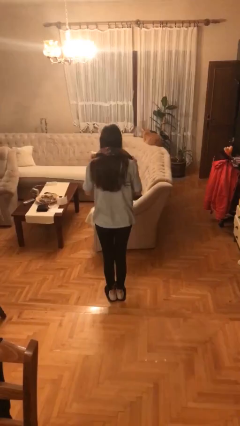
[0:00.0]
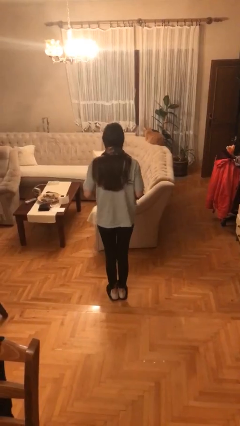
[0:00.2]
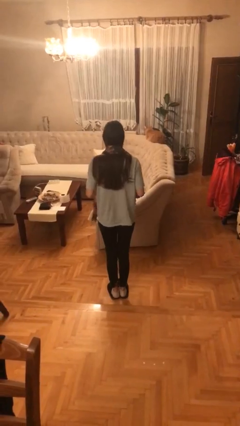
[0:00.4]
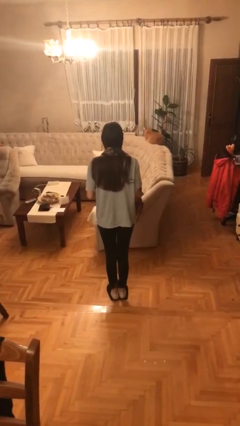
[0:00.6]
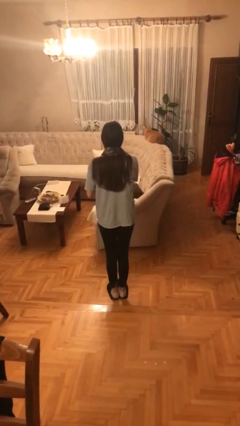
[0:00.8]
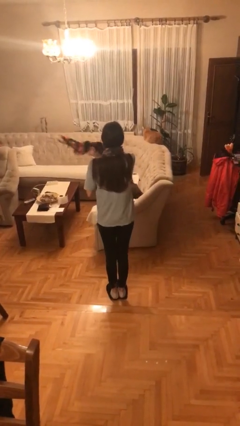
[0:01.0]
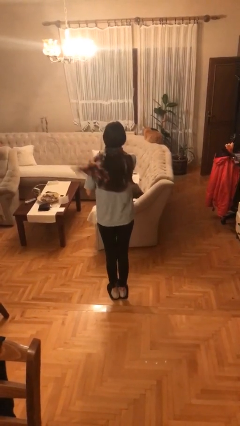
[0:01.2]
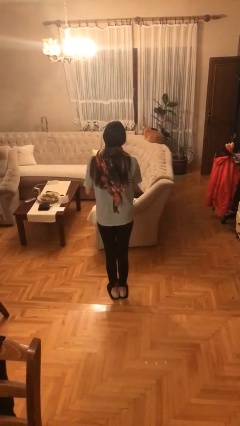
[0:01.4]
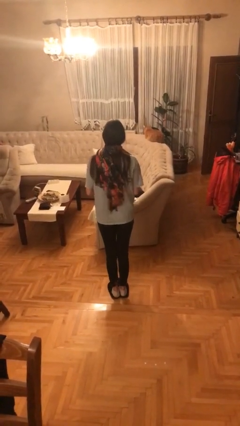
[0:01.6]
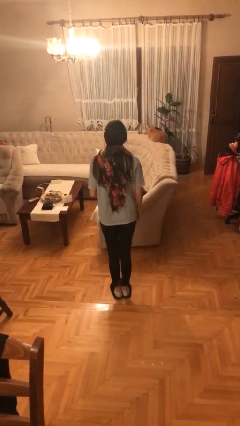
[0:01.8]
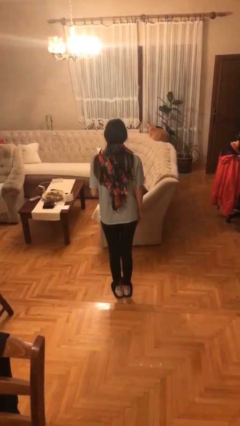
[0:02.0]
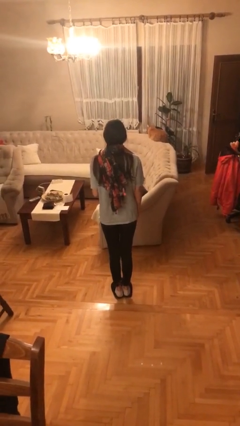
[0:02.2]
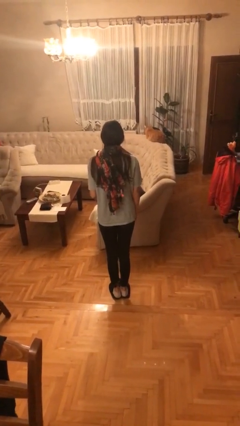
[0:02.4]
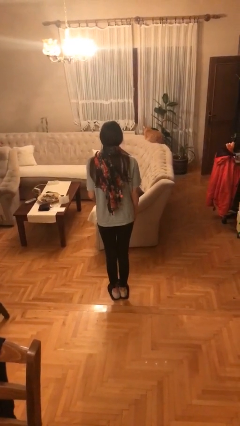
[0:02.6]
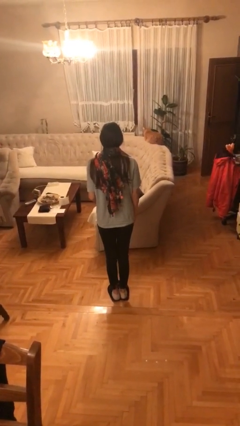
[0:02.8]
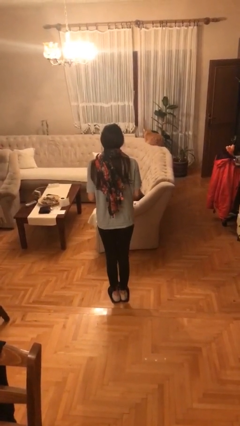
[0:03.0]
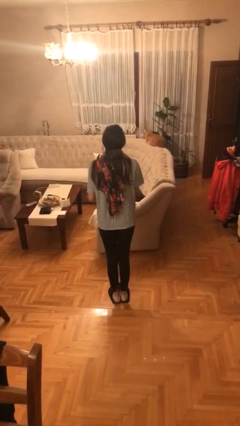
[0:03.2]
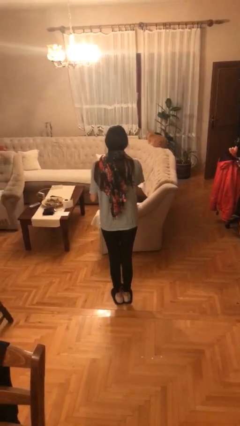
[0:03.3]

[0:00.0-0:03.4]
person puts on scarf

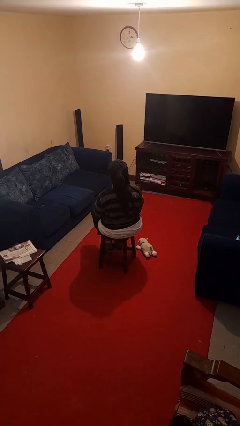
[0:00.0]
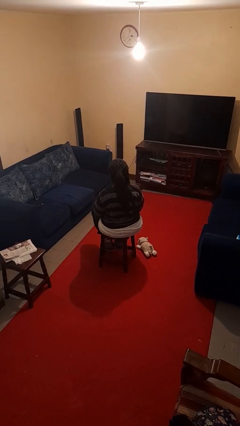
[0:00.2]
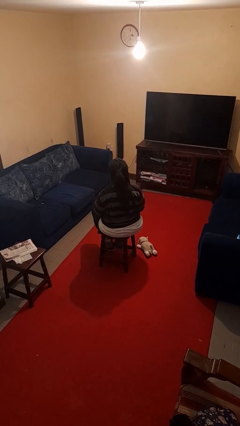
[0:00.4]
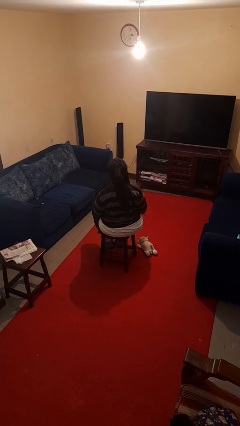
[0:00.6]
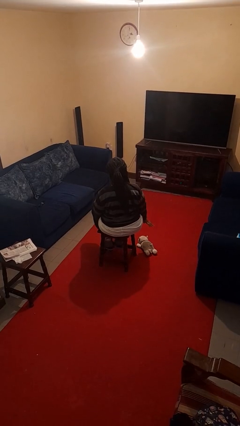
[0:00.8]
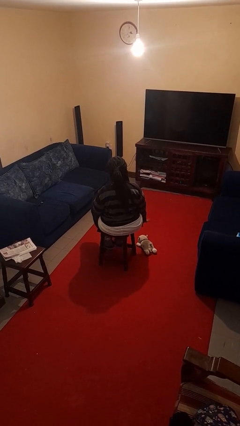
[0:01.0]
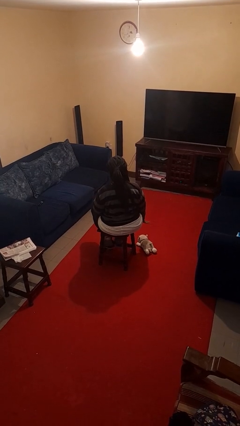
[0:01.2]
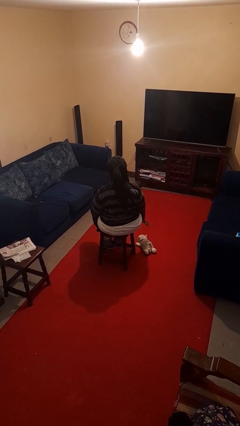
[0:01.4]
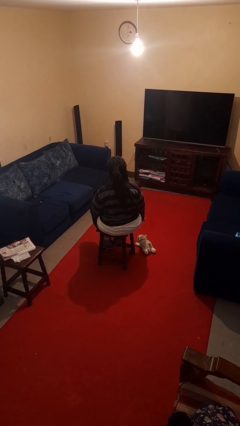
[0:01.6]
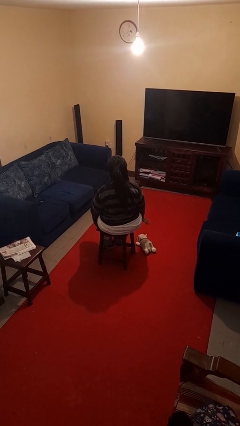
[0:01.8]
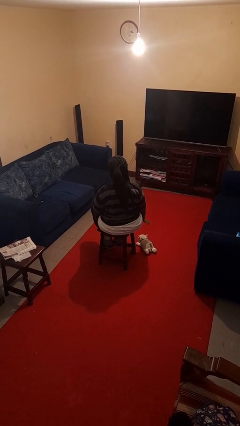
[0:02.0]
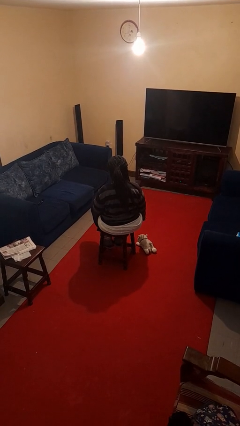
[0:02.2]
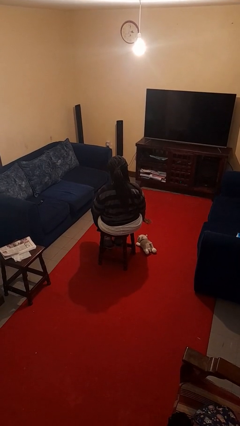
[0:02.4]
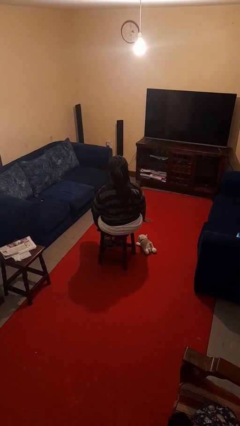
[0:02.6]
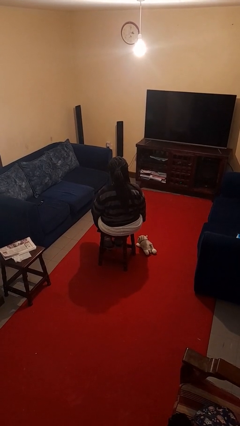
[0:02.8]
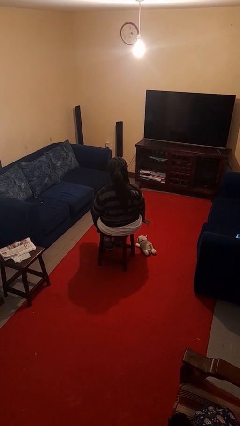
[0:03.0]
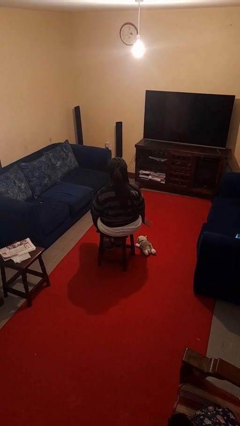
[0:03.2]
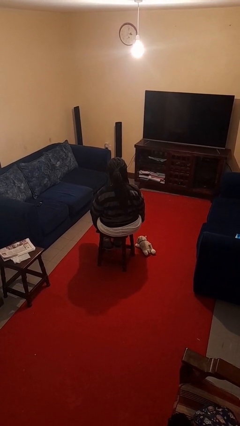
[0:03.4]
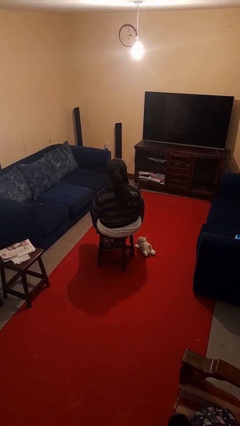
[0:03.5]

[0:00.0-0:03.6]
person waves hand over object

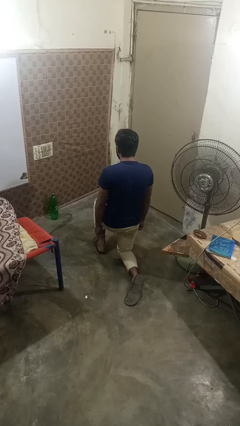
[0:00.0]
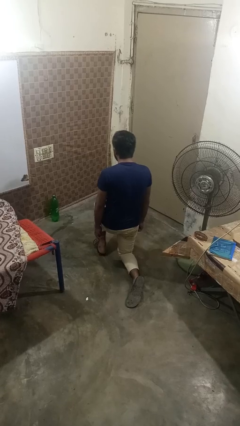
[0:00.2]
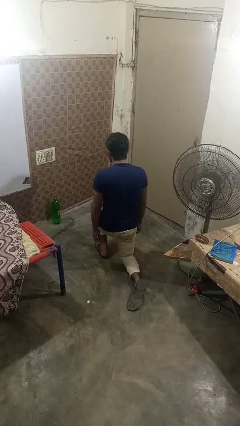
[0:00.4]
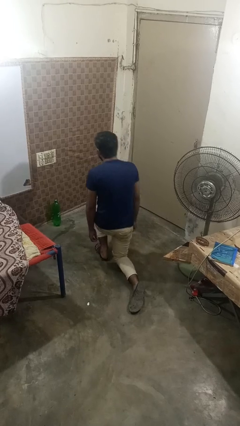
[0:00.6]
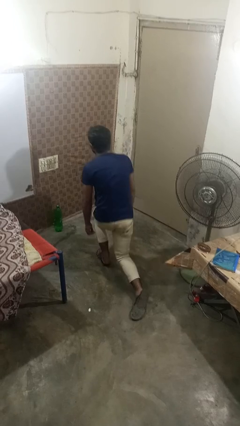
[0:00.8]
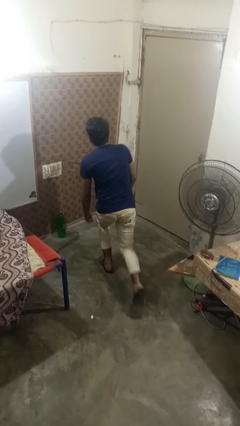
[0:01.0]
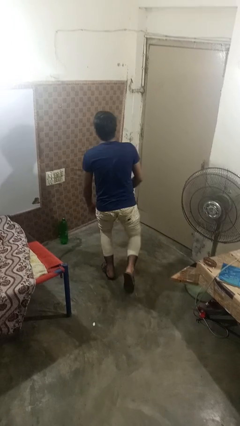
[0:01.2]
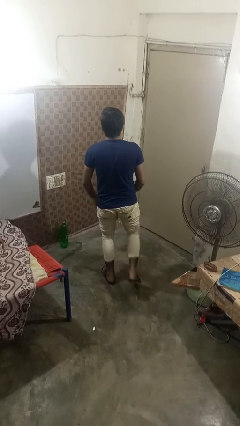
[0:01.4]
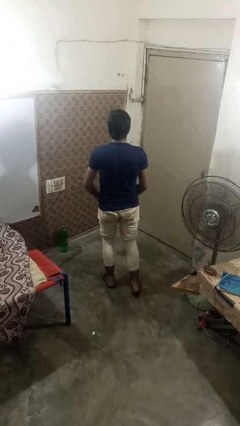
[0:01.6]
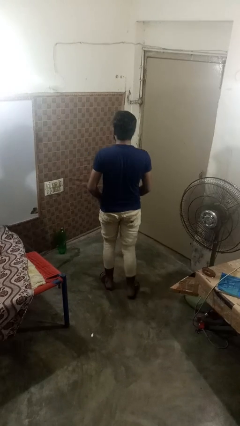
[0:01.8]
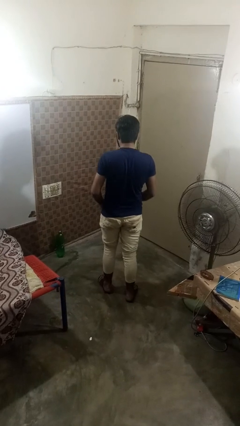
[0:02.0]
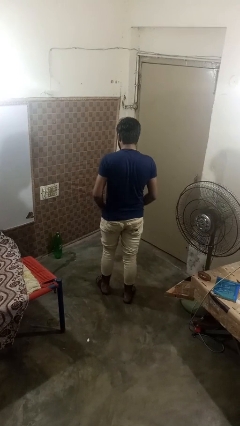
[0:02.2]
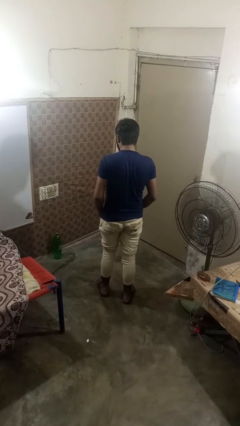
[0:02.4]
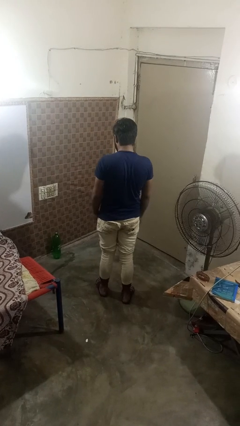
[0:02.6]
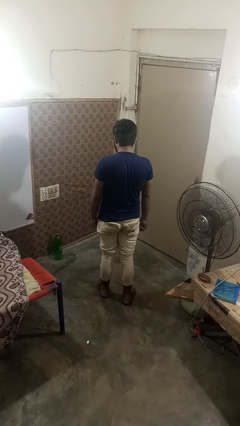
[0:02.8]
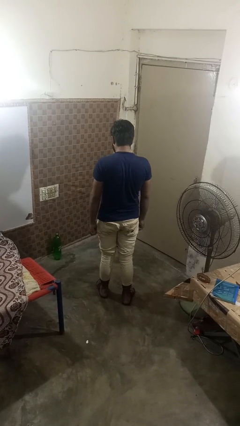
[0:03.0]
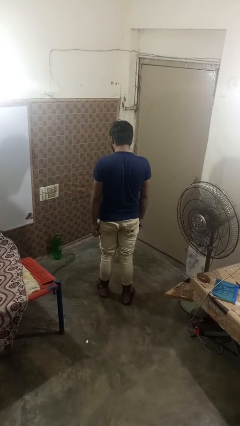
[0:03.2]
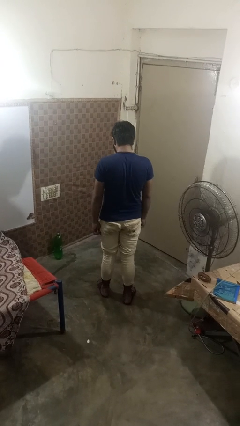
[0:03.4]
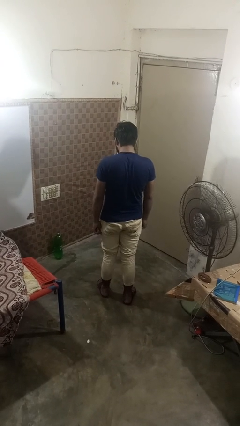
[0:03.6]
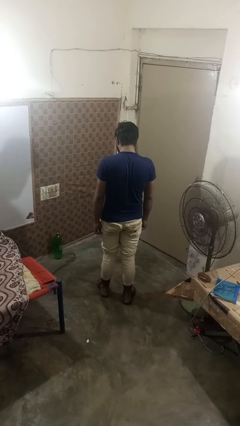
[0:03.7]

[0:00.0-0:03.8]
person stands up from floor

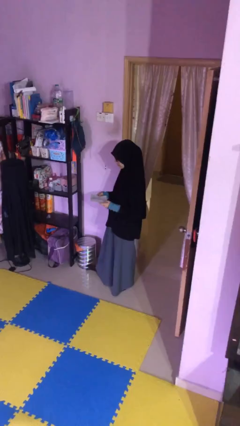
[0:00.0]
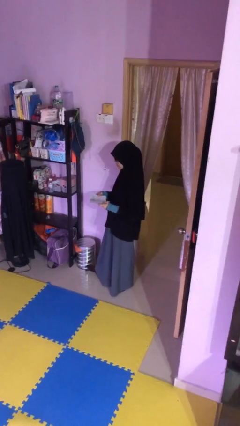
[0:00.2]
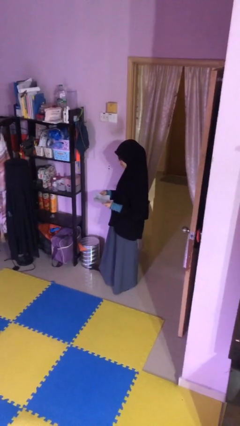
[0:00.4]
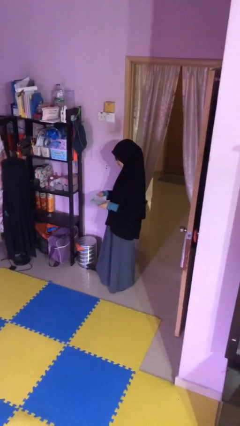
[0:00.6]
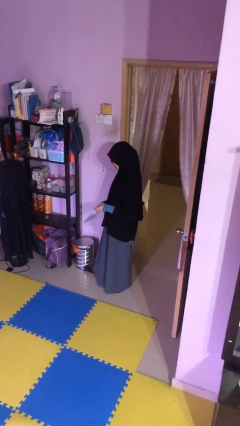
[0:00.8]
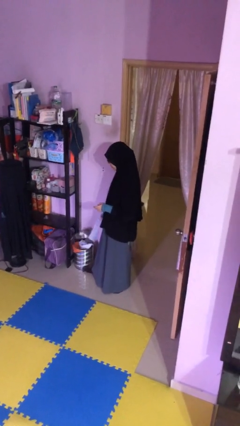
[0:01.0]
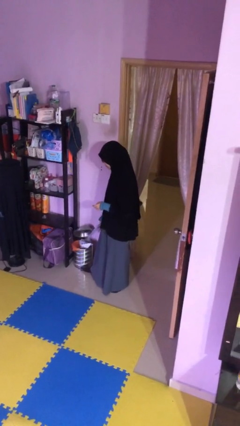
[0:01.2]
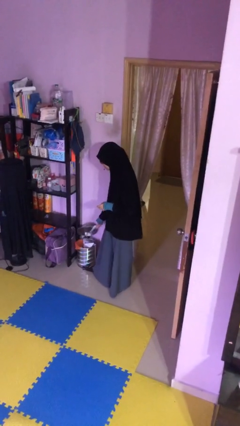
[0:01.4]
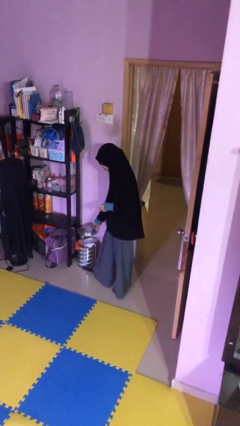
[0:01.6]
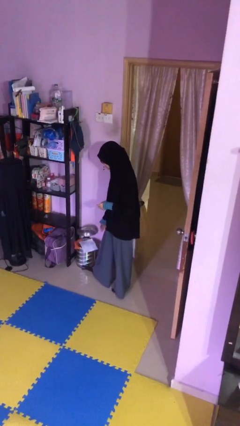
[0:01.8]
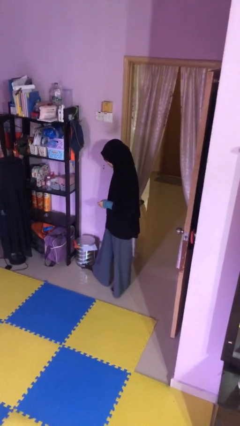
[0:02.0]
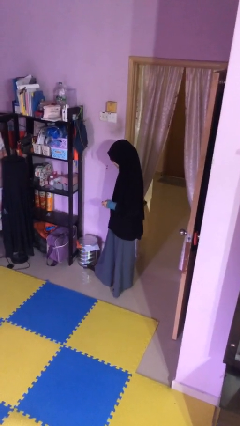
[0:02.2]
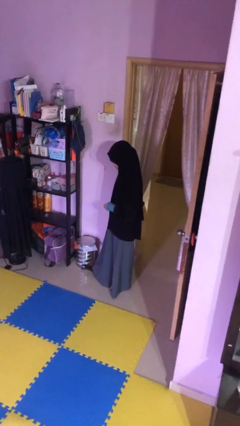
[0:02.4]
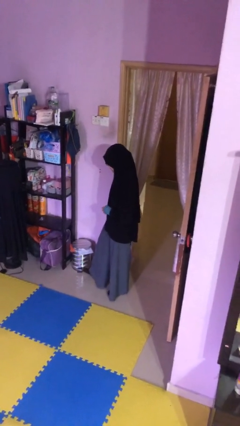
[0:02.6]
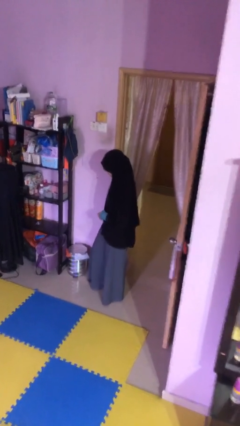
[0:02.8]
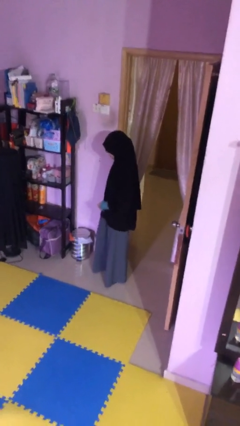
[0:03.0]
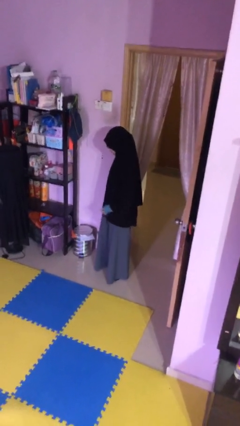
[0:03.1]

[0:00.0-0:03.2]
person discards trash

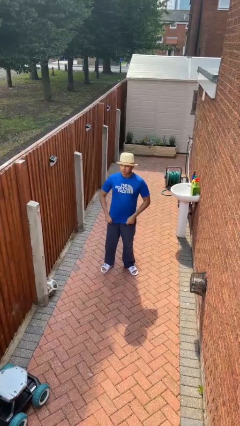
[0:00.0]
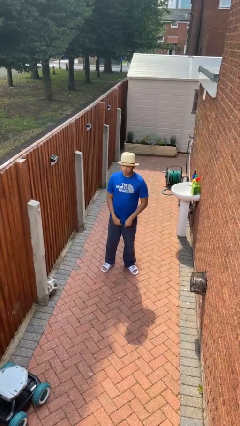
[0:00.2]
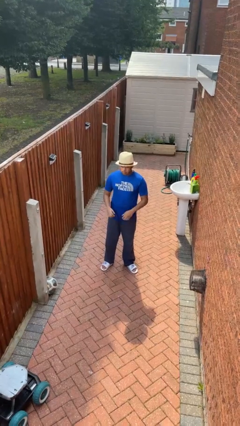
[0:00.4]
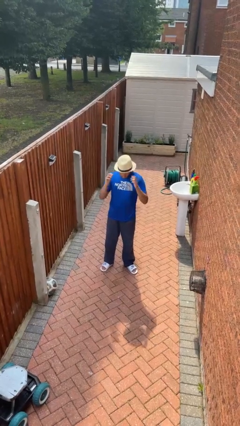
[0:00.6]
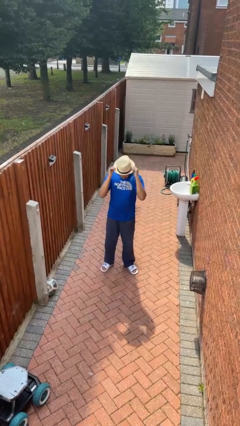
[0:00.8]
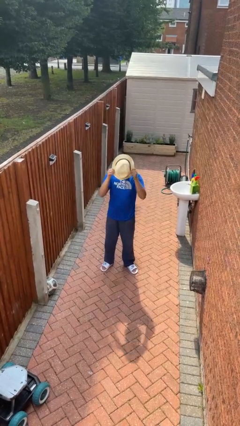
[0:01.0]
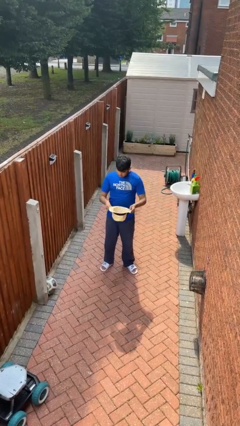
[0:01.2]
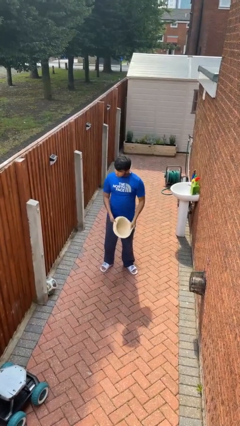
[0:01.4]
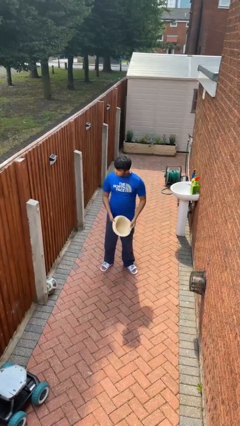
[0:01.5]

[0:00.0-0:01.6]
person takes off hat

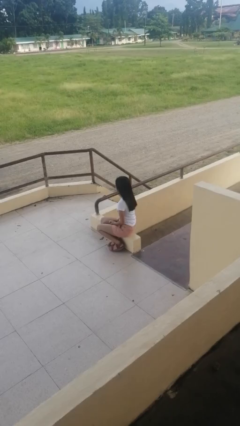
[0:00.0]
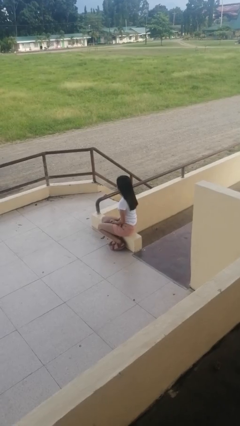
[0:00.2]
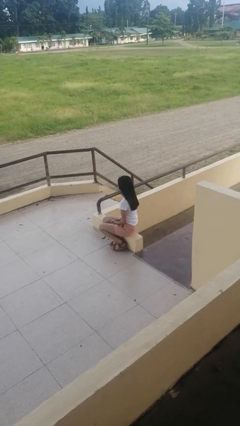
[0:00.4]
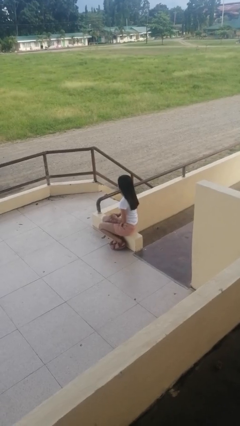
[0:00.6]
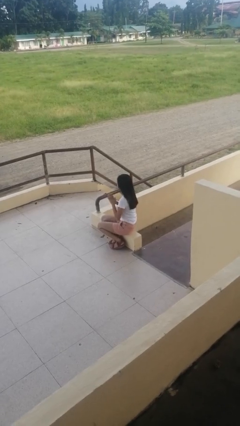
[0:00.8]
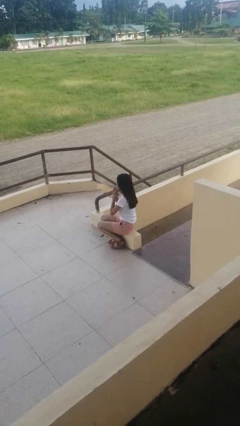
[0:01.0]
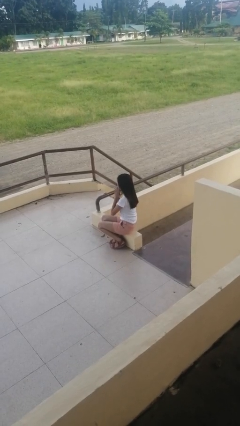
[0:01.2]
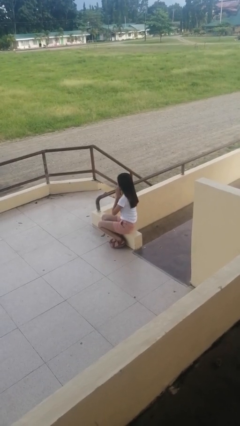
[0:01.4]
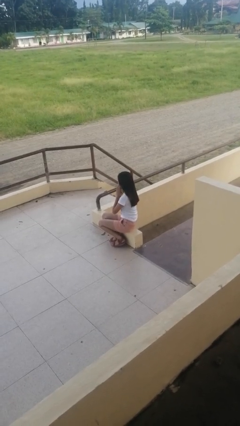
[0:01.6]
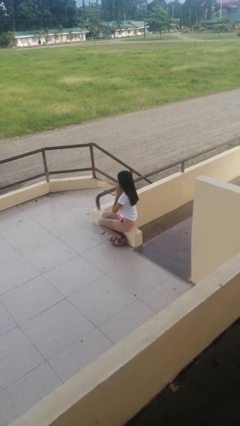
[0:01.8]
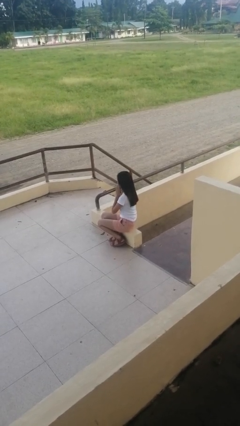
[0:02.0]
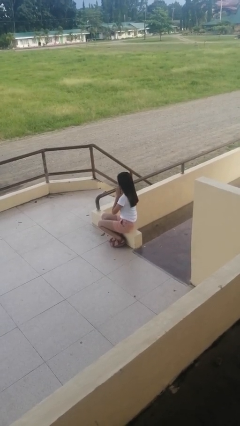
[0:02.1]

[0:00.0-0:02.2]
person prays
